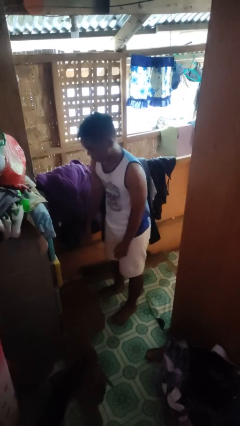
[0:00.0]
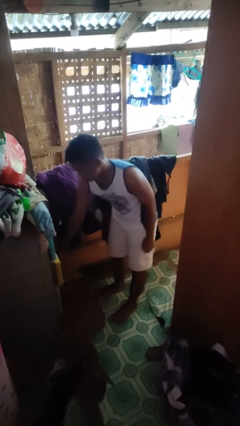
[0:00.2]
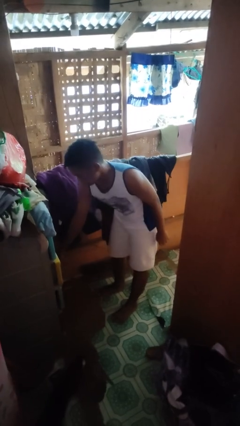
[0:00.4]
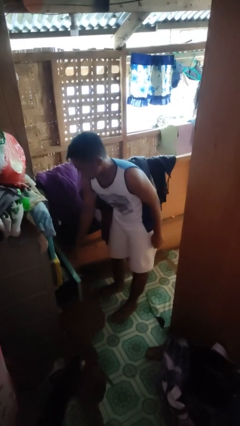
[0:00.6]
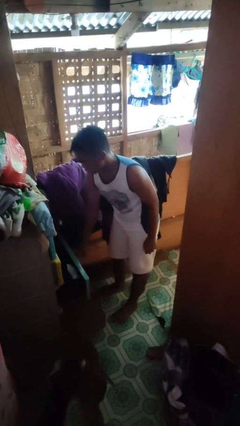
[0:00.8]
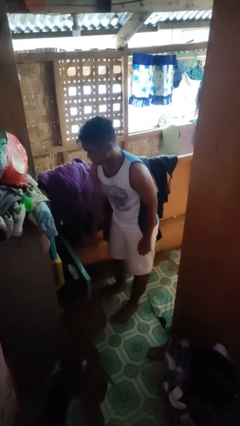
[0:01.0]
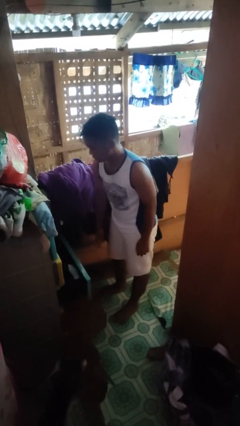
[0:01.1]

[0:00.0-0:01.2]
person opens dresser drawer

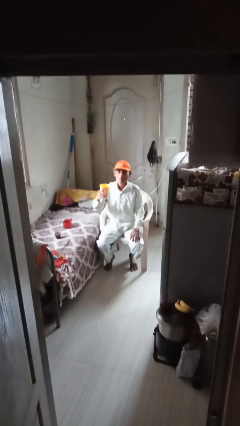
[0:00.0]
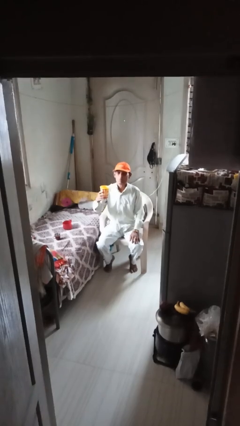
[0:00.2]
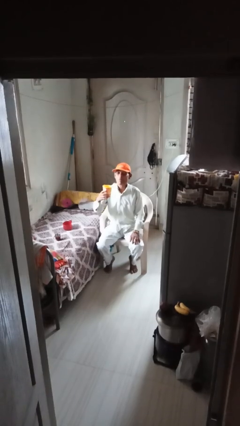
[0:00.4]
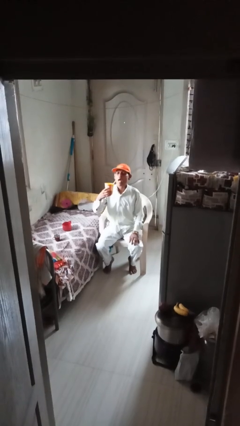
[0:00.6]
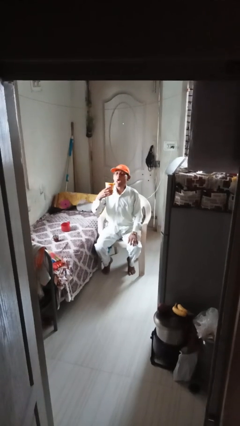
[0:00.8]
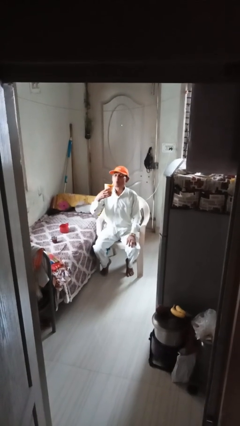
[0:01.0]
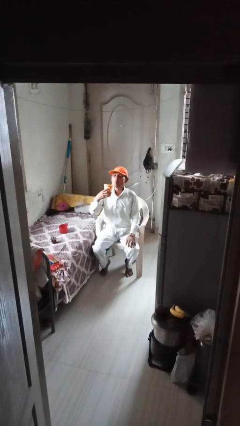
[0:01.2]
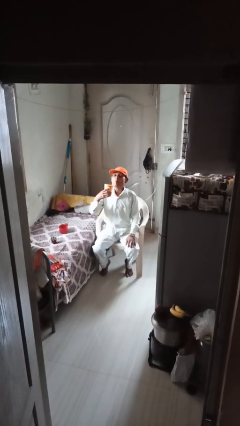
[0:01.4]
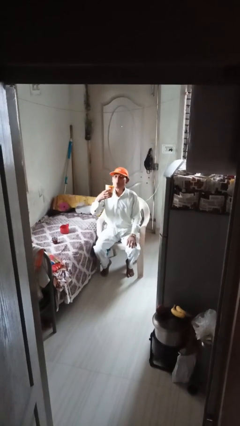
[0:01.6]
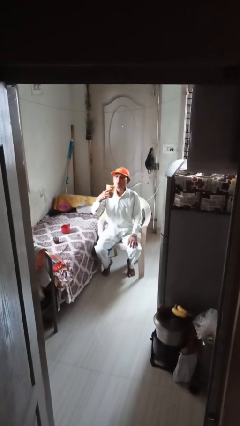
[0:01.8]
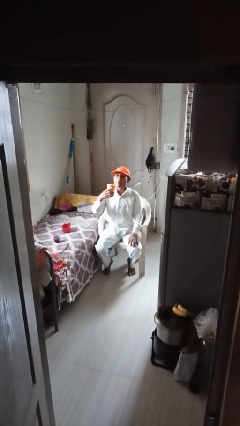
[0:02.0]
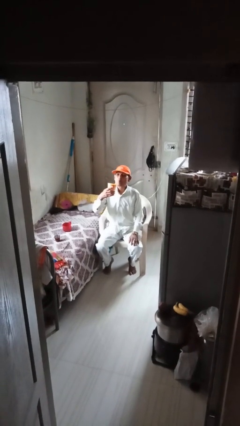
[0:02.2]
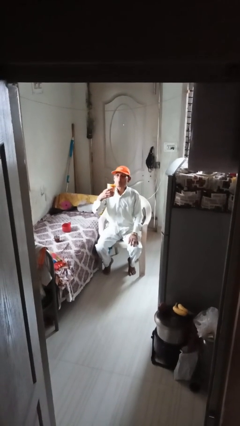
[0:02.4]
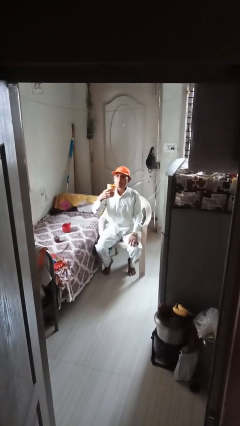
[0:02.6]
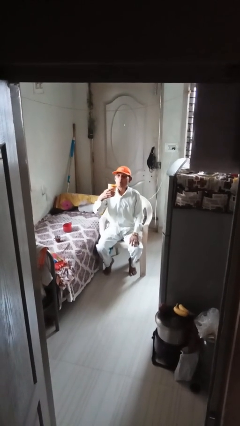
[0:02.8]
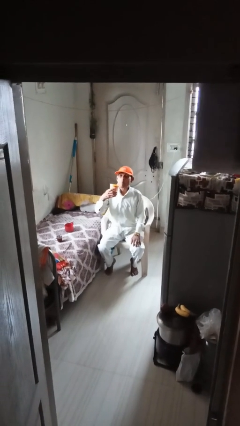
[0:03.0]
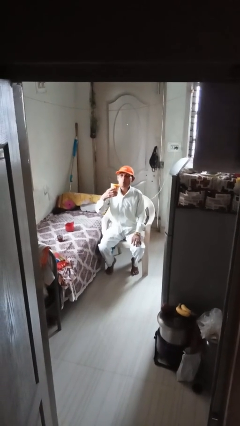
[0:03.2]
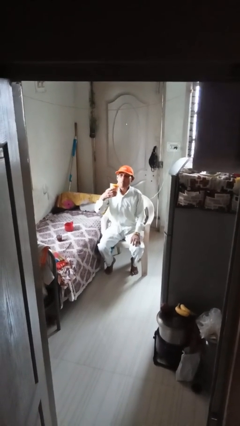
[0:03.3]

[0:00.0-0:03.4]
person drinks from straw

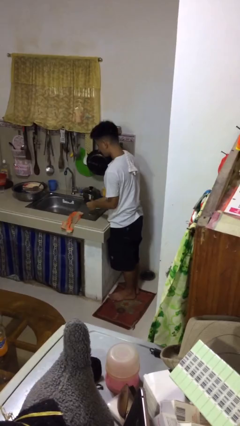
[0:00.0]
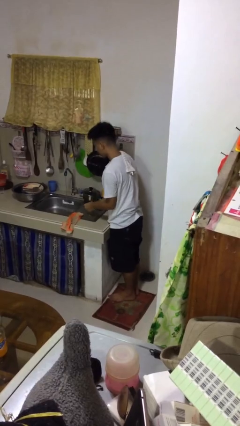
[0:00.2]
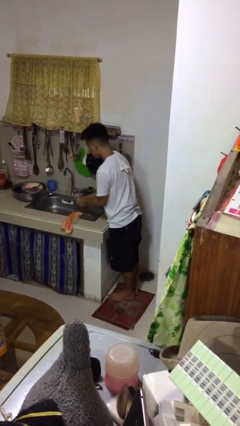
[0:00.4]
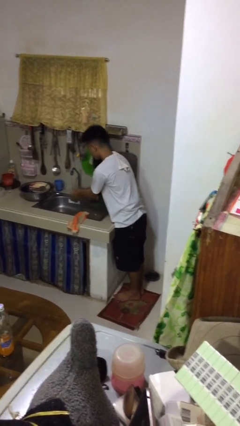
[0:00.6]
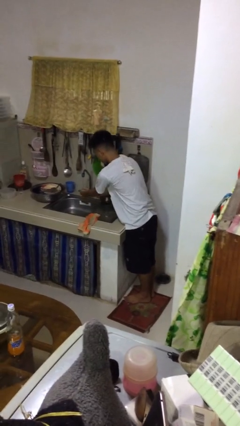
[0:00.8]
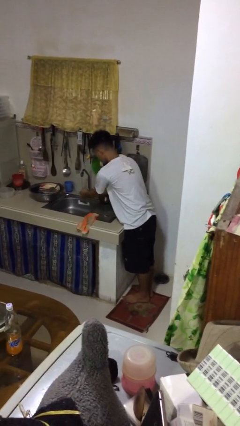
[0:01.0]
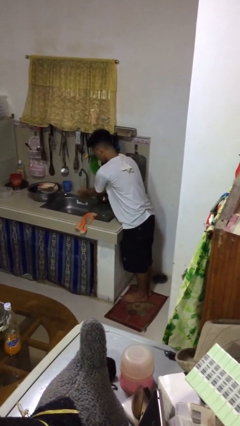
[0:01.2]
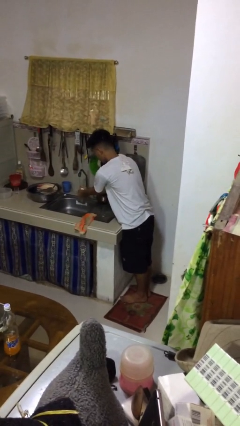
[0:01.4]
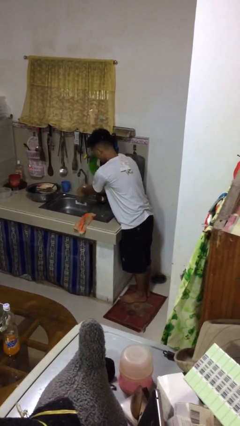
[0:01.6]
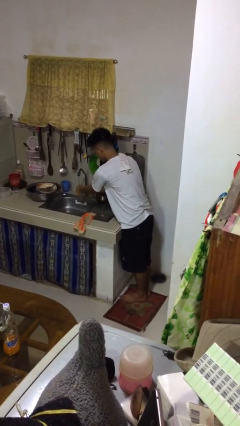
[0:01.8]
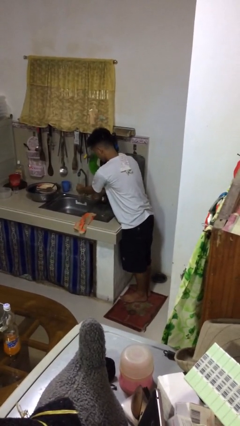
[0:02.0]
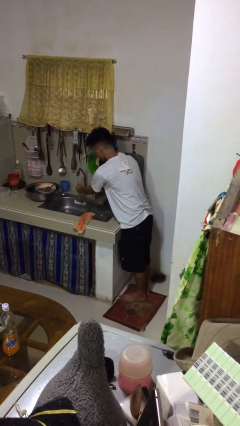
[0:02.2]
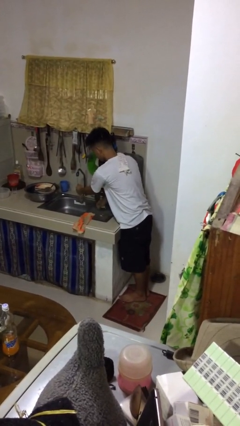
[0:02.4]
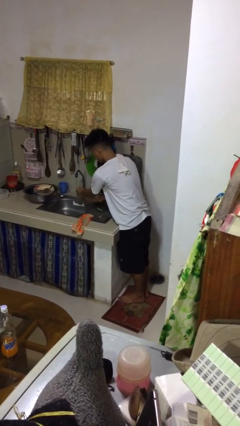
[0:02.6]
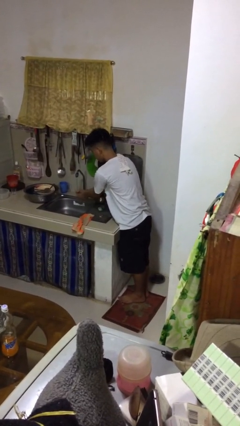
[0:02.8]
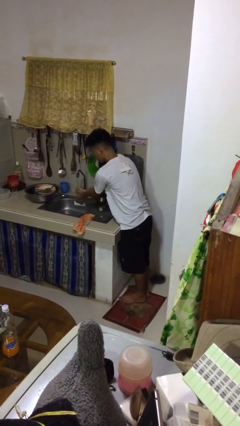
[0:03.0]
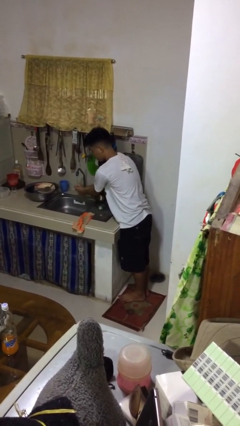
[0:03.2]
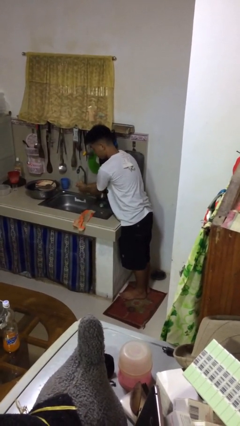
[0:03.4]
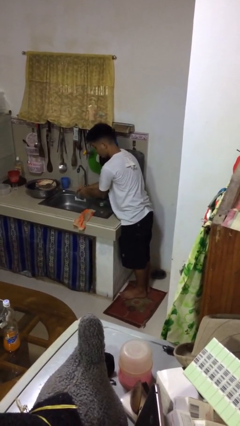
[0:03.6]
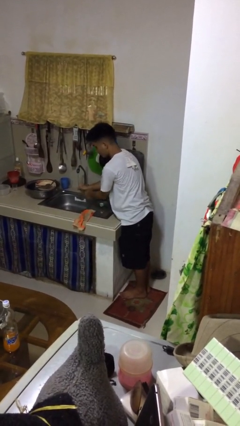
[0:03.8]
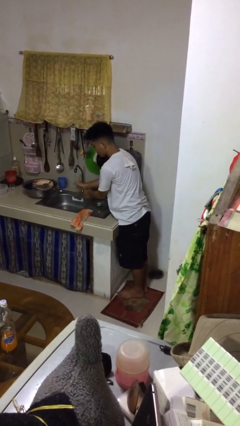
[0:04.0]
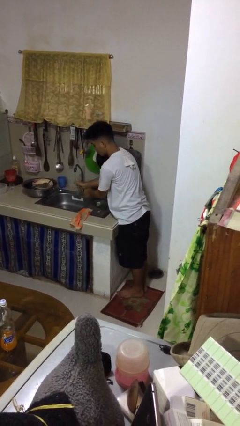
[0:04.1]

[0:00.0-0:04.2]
person washes hands

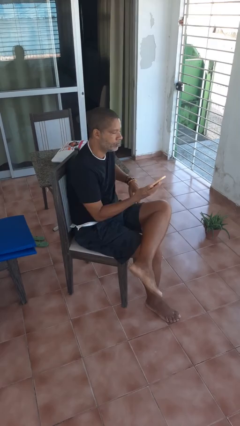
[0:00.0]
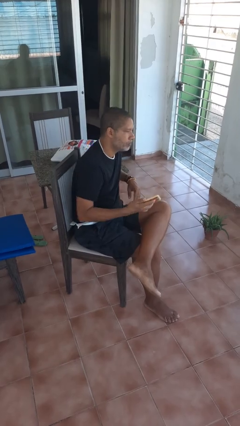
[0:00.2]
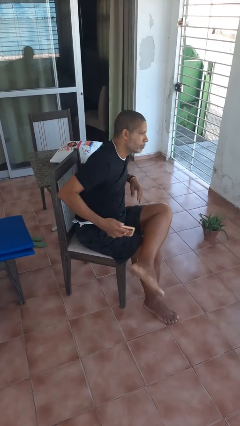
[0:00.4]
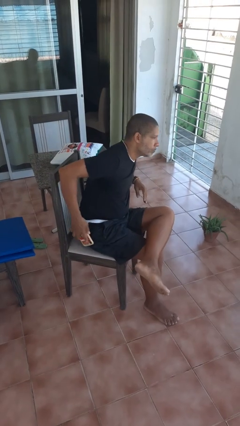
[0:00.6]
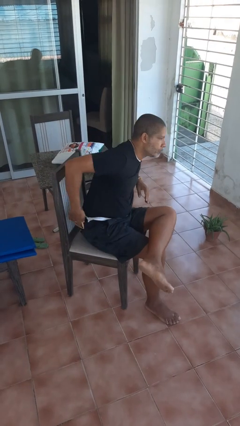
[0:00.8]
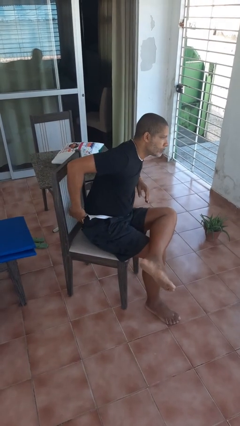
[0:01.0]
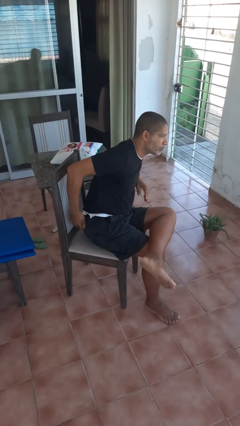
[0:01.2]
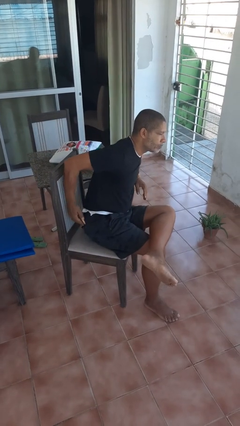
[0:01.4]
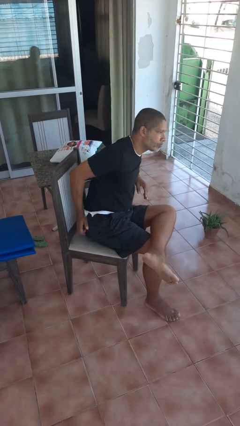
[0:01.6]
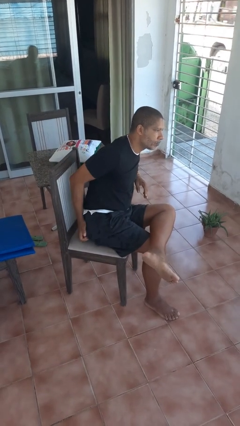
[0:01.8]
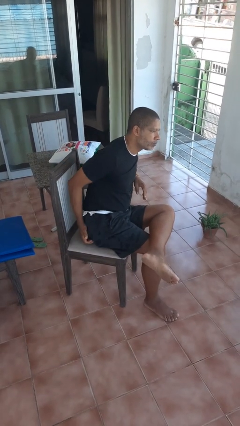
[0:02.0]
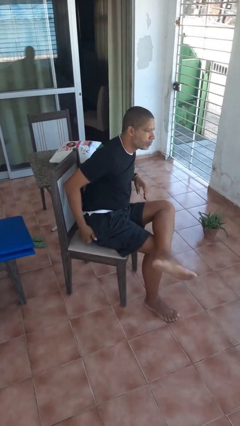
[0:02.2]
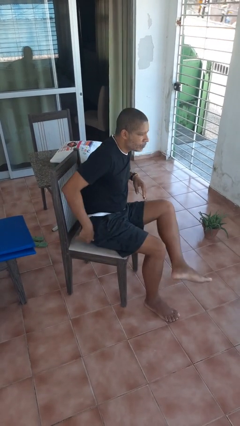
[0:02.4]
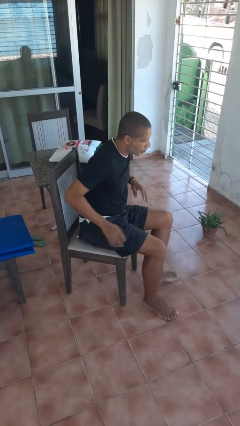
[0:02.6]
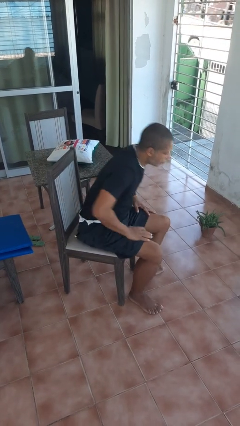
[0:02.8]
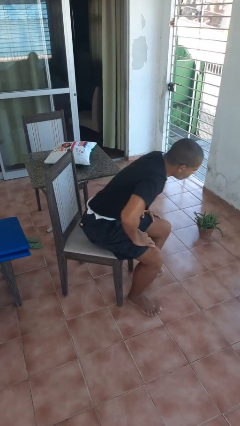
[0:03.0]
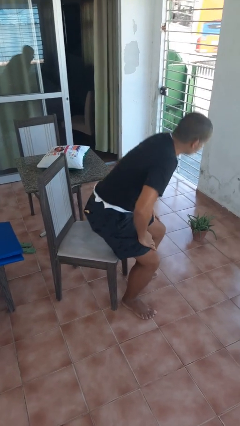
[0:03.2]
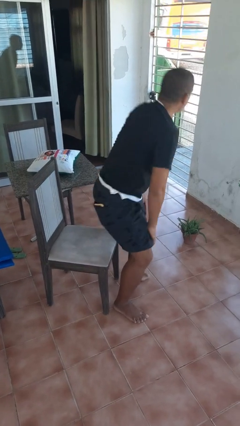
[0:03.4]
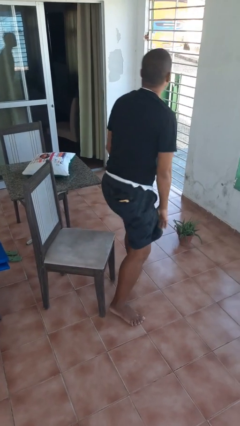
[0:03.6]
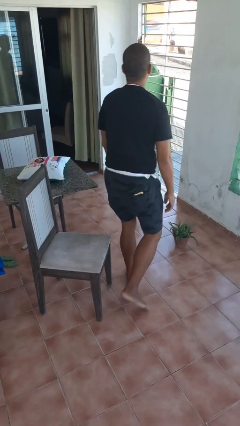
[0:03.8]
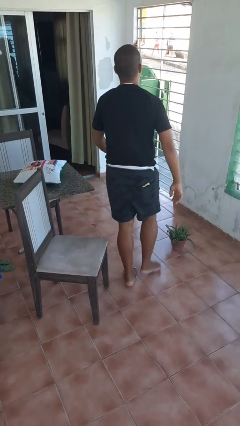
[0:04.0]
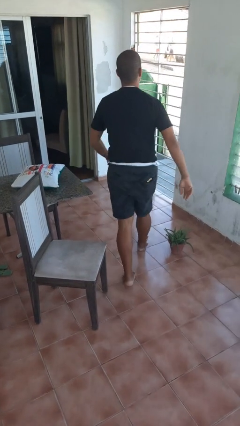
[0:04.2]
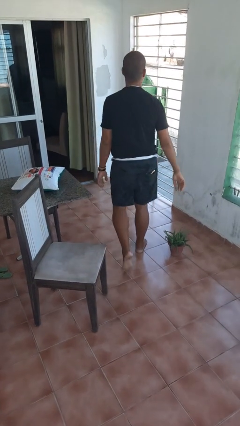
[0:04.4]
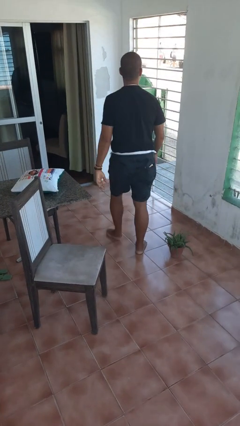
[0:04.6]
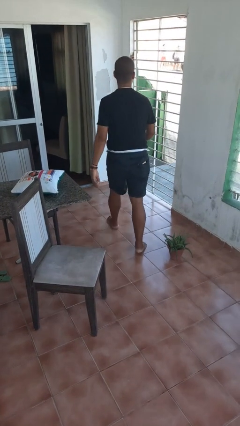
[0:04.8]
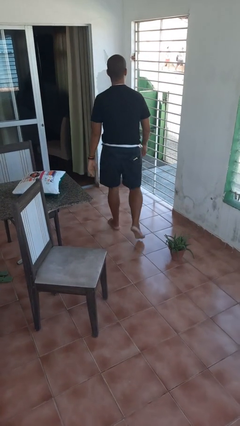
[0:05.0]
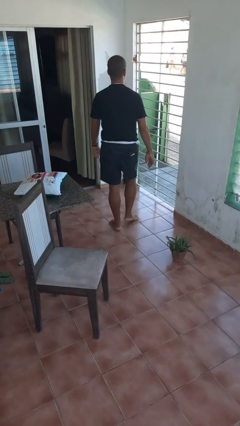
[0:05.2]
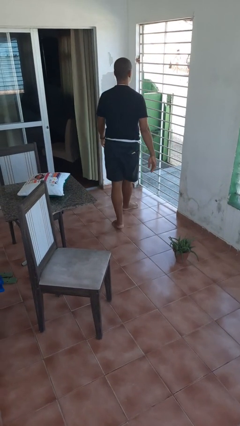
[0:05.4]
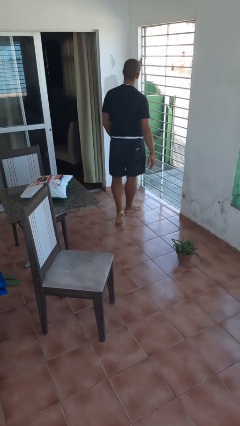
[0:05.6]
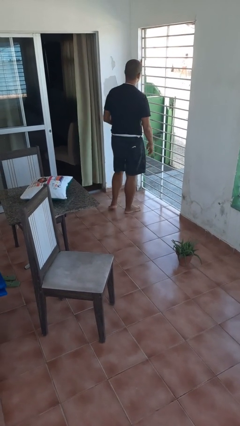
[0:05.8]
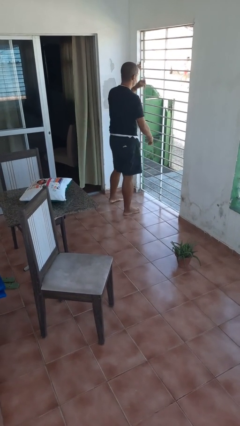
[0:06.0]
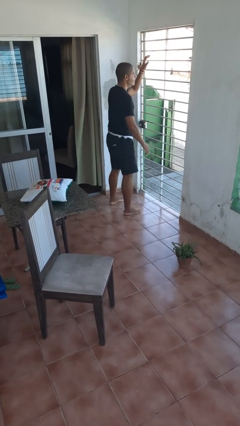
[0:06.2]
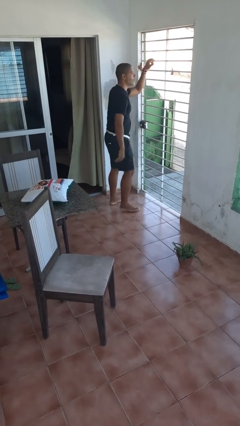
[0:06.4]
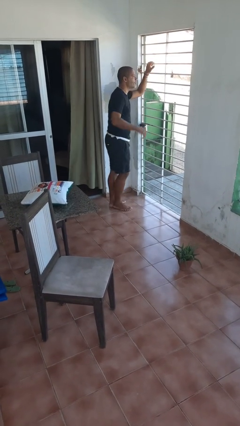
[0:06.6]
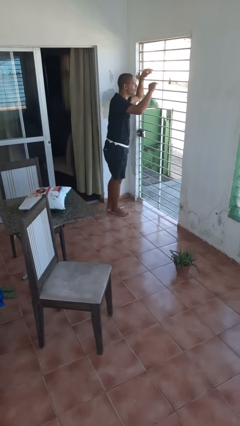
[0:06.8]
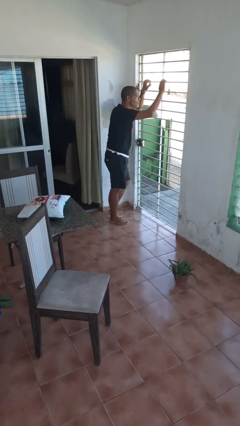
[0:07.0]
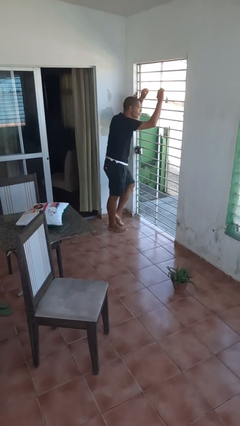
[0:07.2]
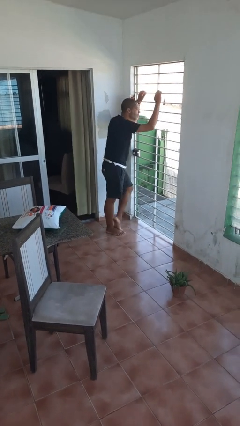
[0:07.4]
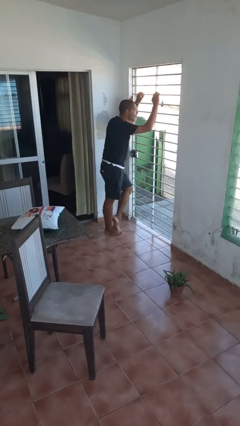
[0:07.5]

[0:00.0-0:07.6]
person puts phone into pocket

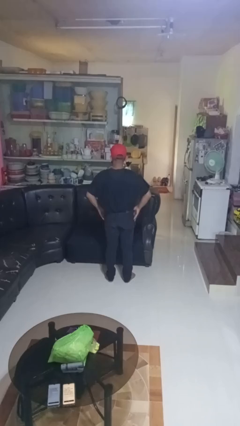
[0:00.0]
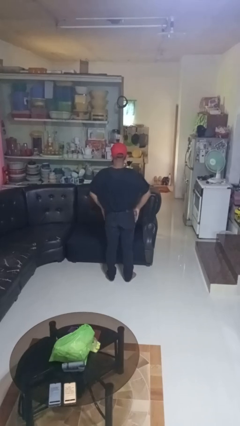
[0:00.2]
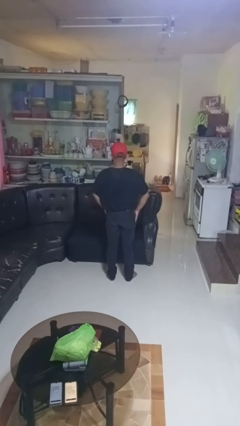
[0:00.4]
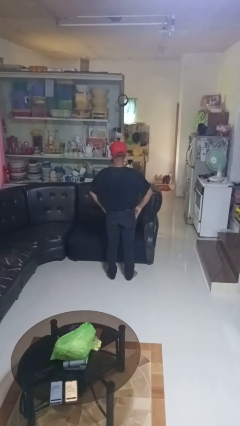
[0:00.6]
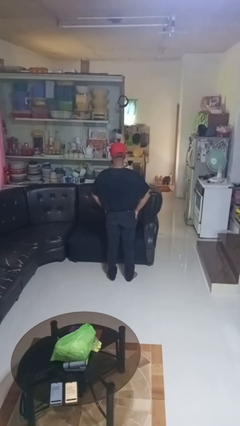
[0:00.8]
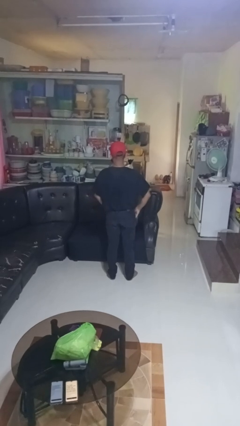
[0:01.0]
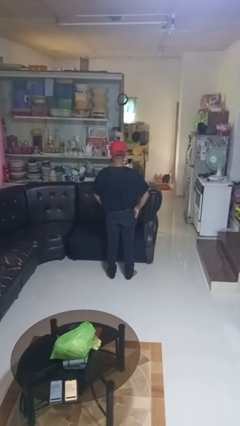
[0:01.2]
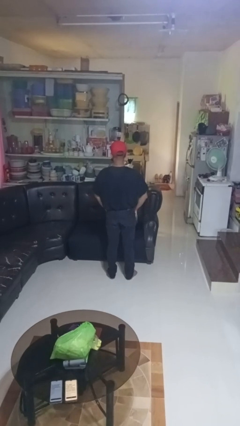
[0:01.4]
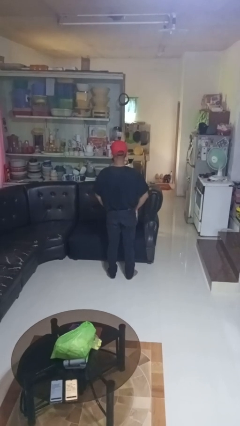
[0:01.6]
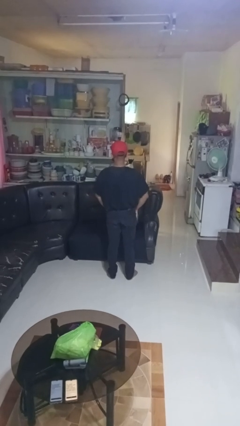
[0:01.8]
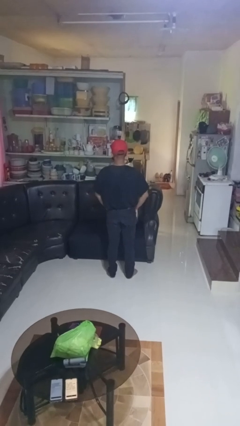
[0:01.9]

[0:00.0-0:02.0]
person puts hands in back pockets
